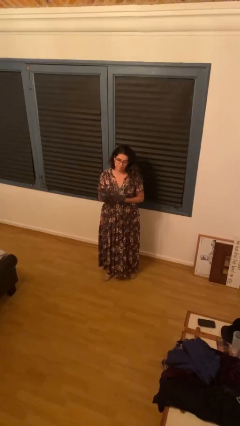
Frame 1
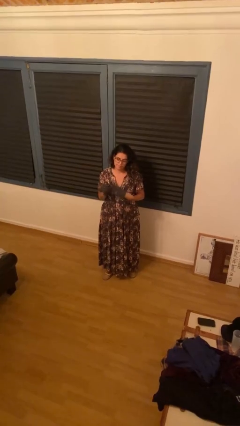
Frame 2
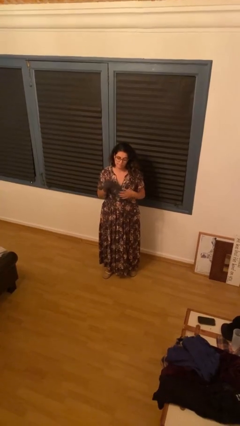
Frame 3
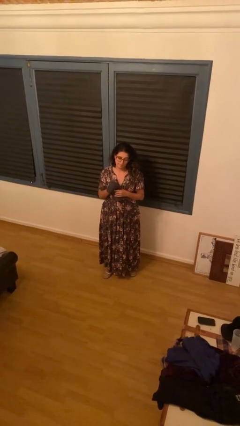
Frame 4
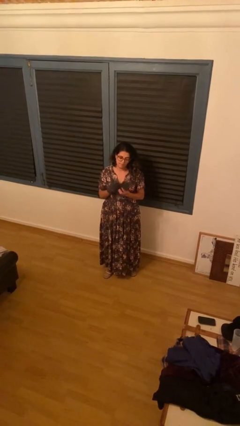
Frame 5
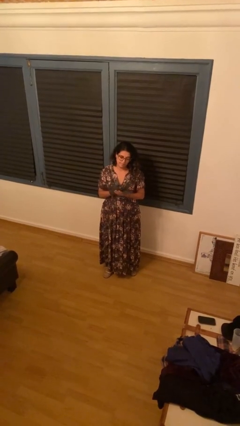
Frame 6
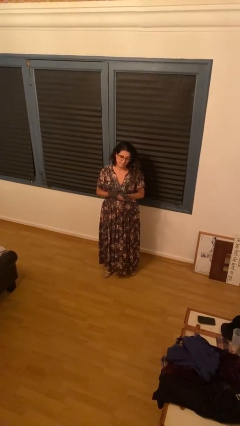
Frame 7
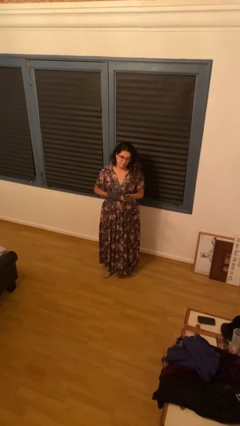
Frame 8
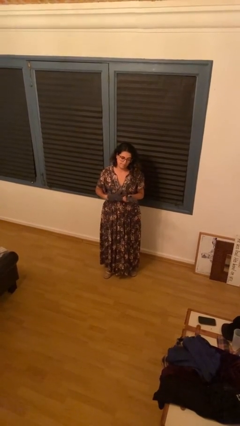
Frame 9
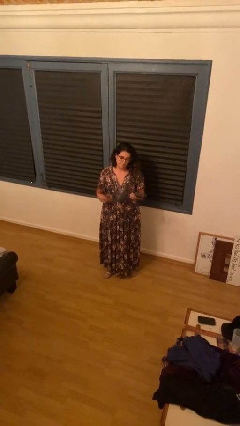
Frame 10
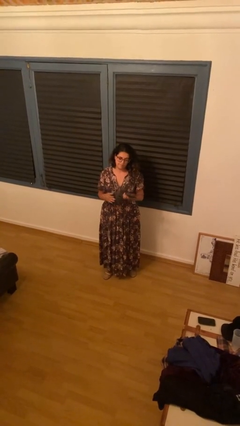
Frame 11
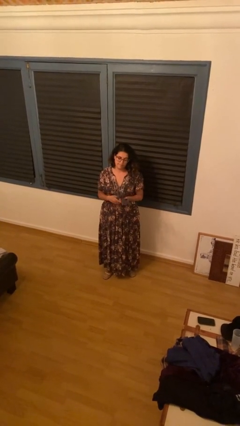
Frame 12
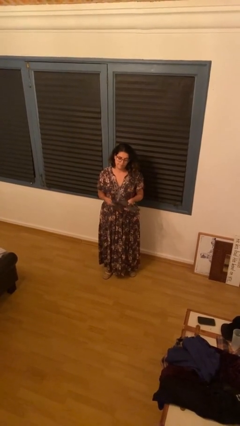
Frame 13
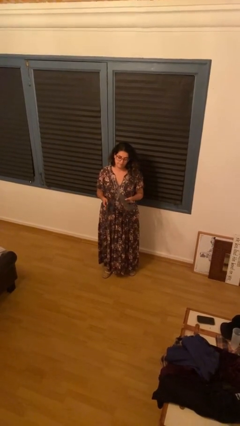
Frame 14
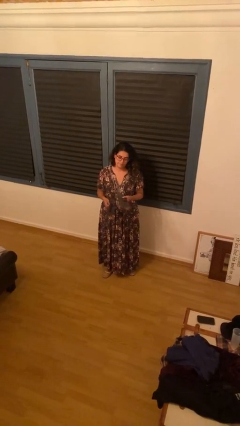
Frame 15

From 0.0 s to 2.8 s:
person takes off gloves

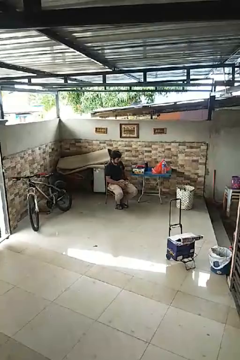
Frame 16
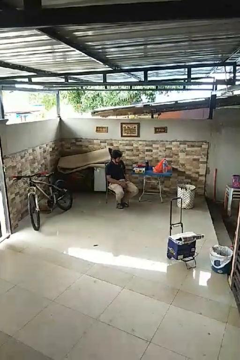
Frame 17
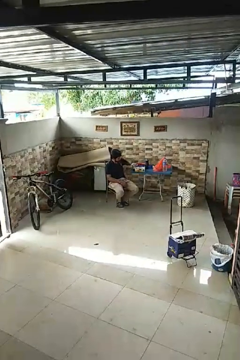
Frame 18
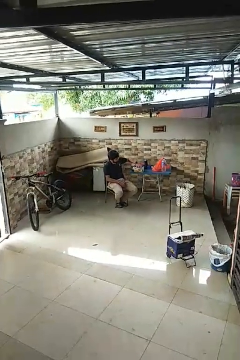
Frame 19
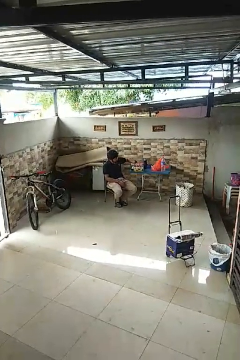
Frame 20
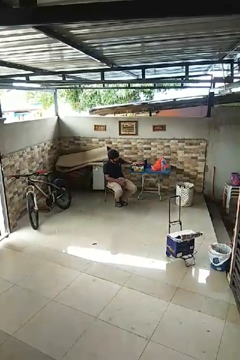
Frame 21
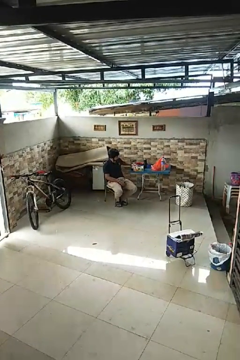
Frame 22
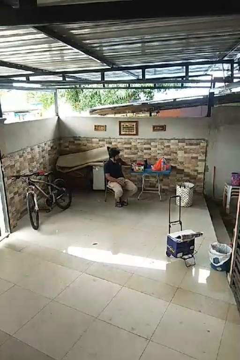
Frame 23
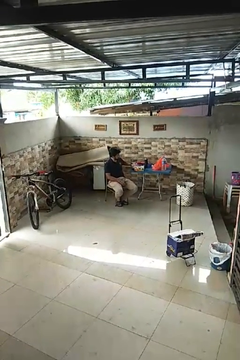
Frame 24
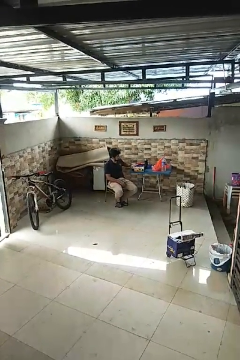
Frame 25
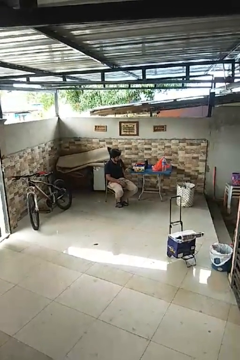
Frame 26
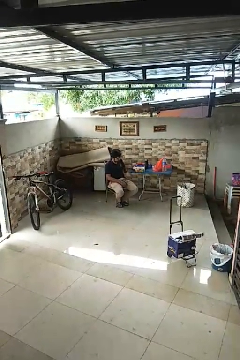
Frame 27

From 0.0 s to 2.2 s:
person taps object with finger

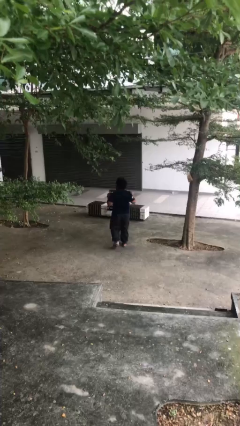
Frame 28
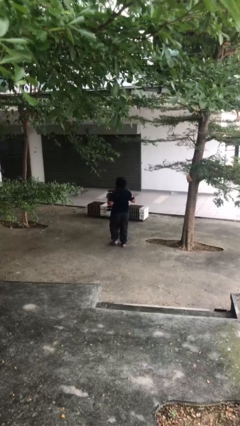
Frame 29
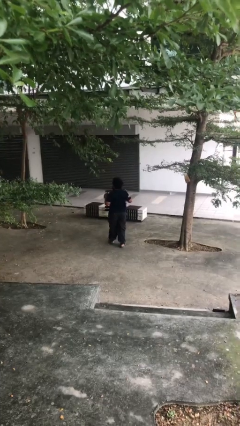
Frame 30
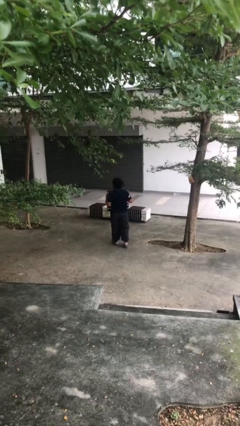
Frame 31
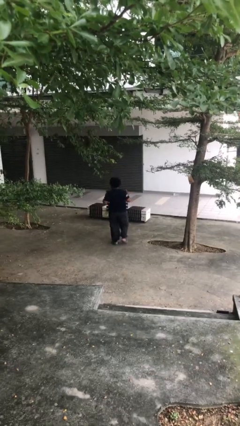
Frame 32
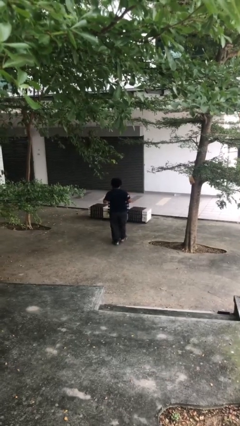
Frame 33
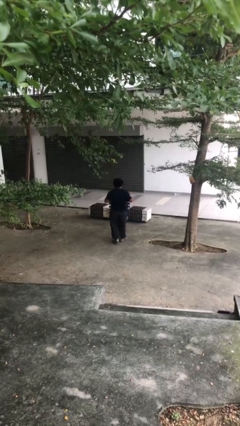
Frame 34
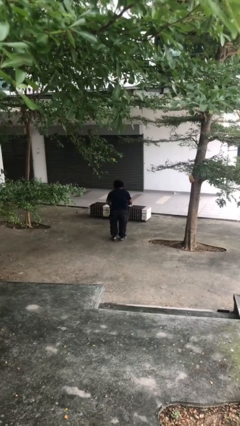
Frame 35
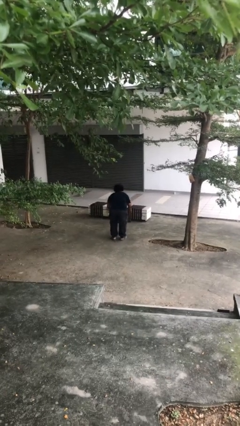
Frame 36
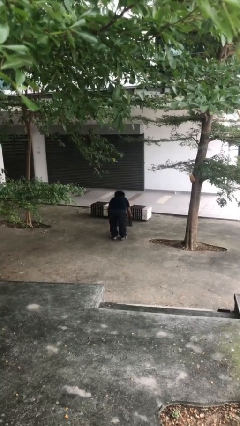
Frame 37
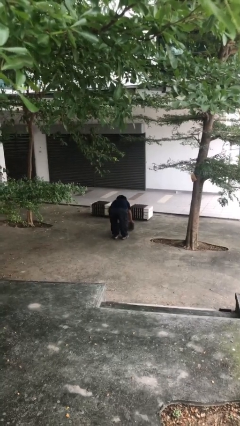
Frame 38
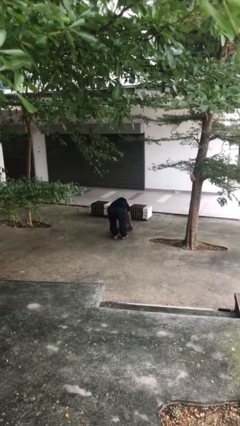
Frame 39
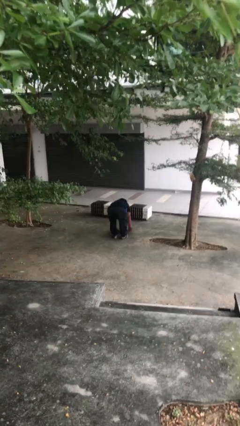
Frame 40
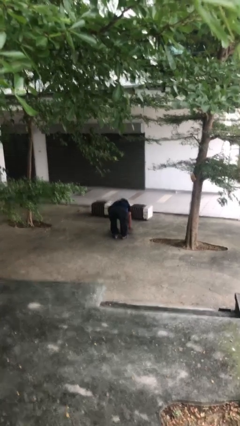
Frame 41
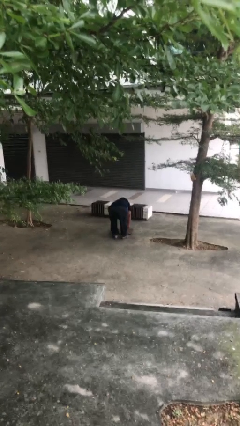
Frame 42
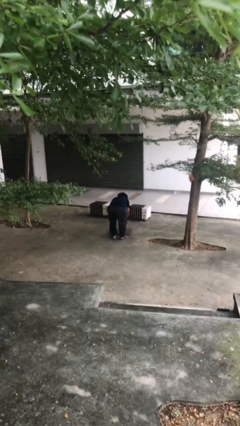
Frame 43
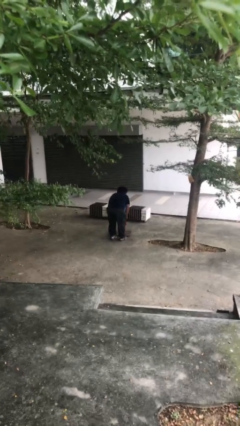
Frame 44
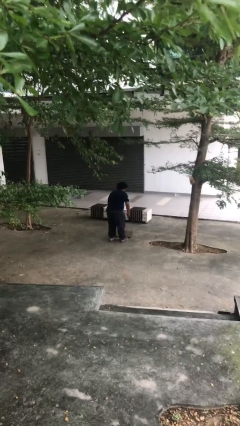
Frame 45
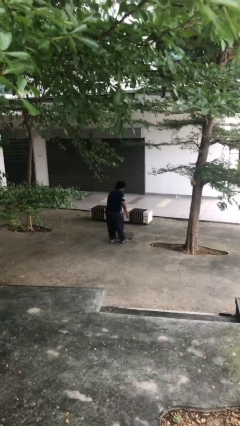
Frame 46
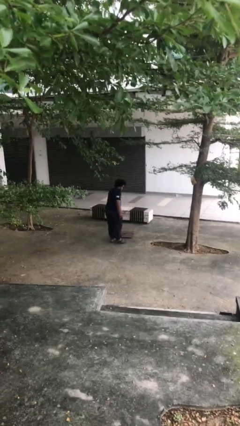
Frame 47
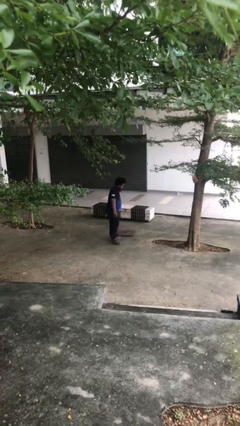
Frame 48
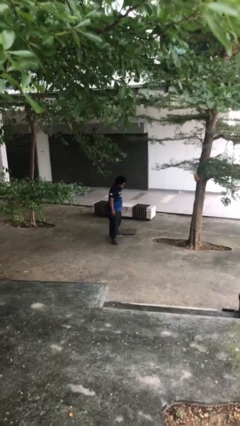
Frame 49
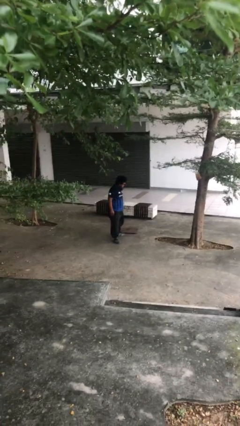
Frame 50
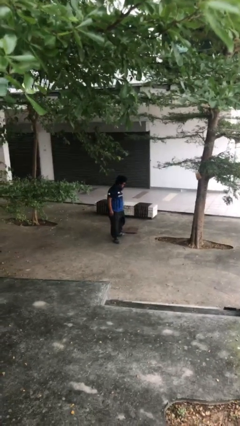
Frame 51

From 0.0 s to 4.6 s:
person puts down object on floor

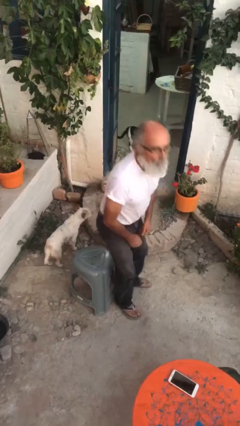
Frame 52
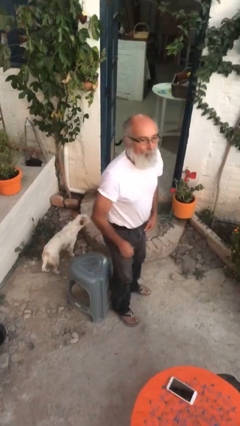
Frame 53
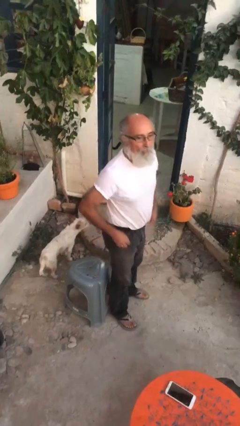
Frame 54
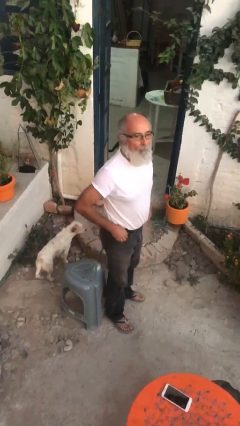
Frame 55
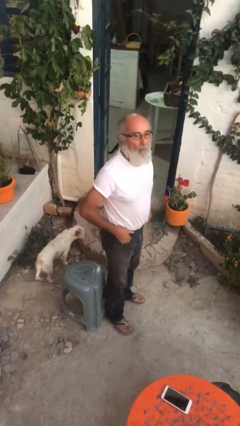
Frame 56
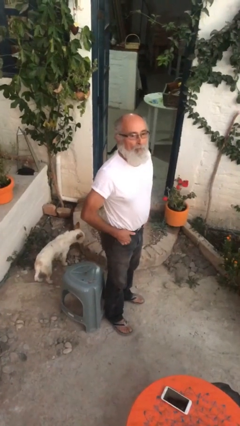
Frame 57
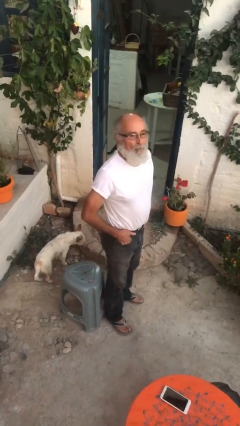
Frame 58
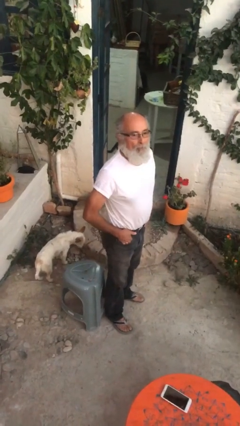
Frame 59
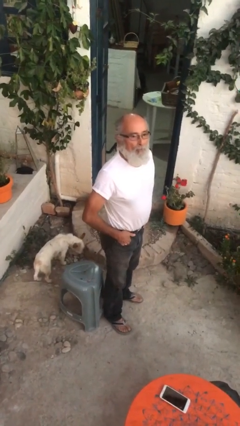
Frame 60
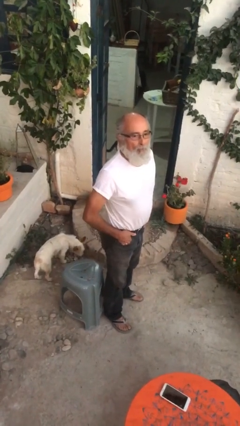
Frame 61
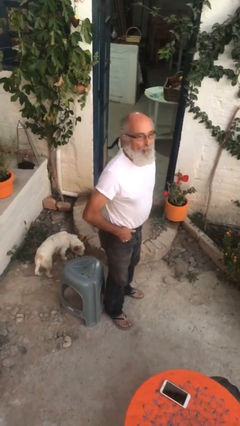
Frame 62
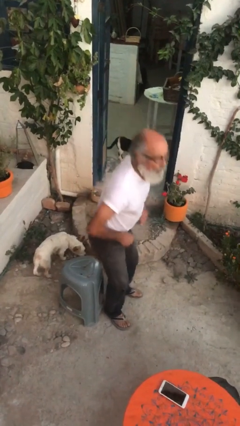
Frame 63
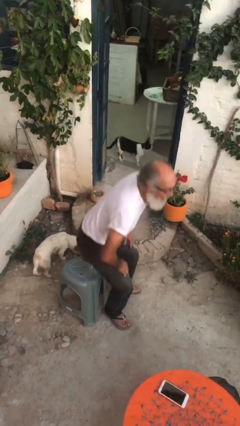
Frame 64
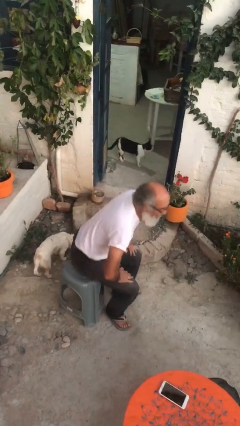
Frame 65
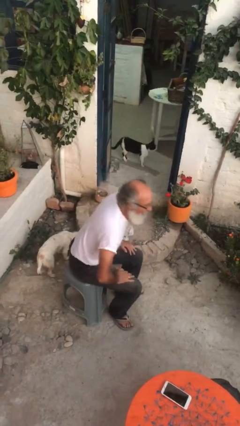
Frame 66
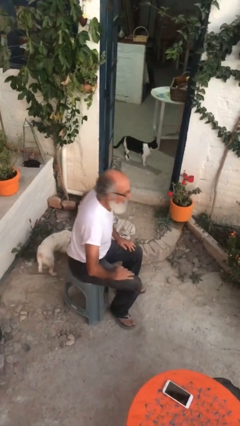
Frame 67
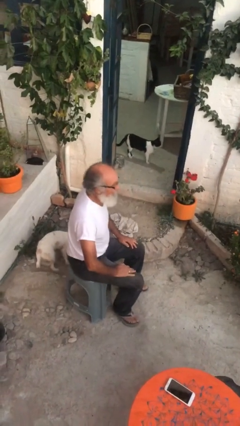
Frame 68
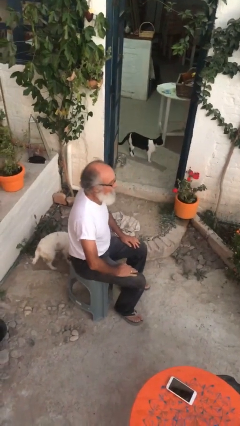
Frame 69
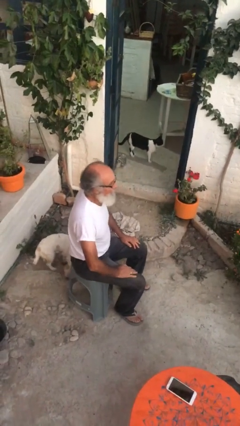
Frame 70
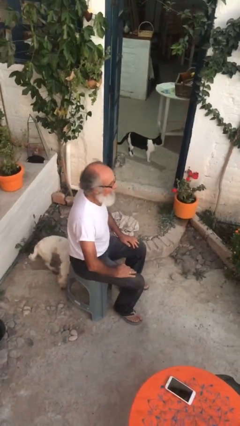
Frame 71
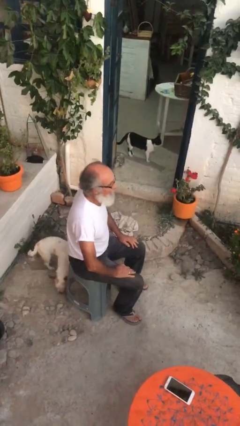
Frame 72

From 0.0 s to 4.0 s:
person sits down

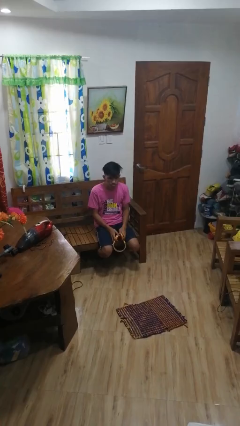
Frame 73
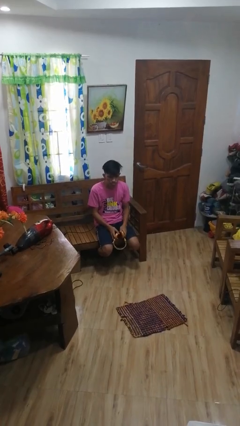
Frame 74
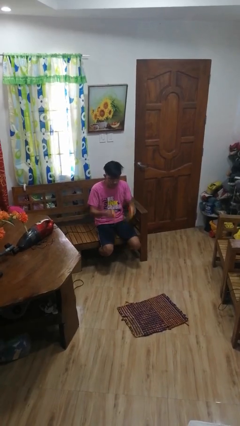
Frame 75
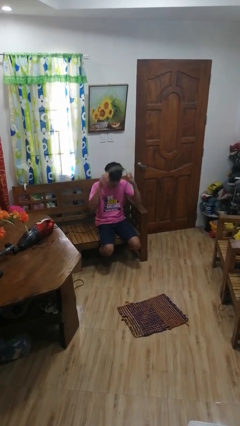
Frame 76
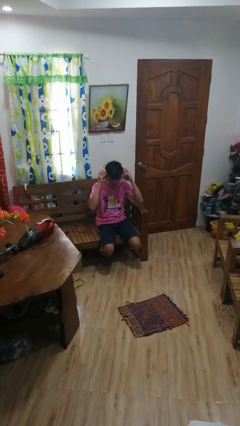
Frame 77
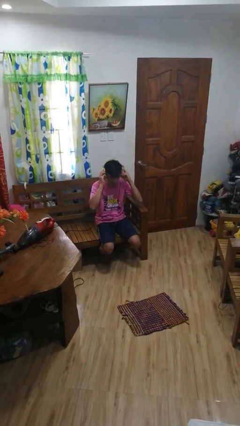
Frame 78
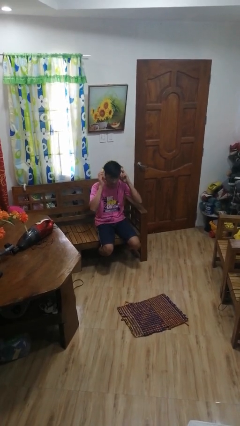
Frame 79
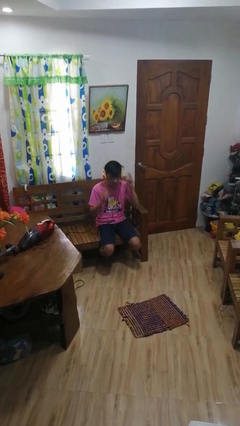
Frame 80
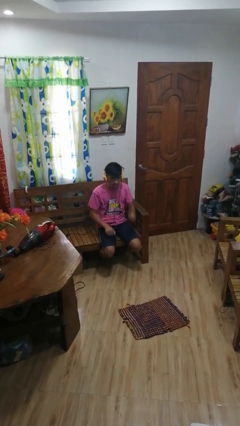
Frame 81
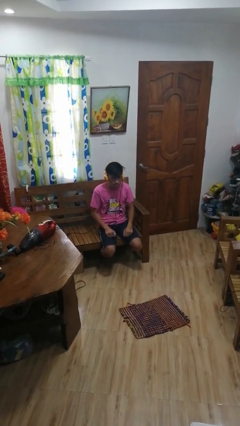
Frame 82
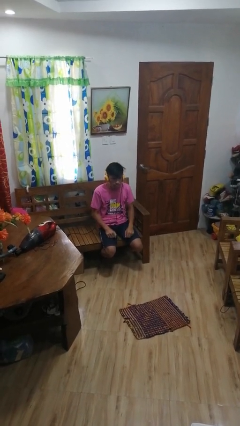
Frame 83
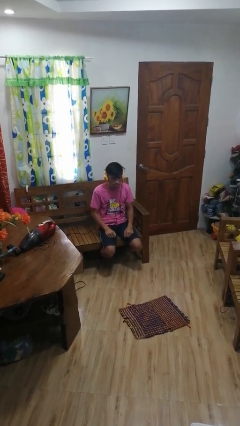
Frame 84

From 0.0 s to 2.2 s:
person puts on headphones

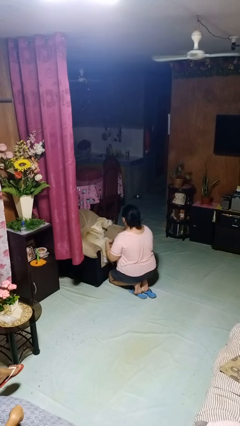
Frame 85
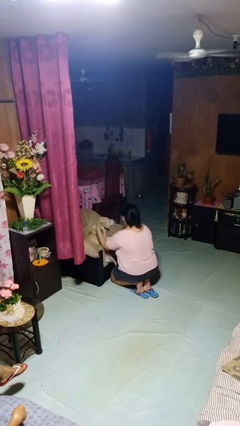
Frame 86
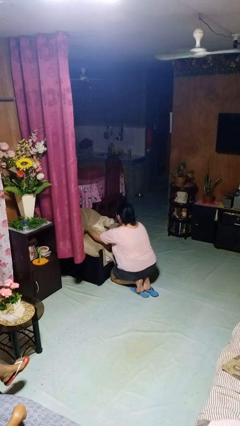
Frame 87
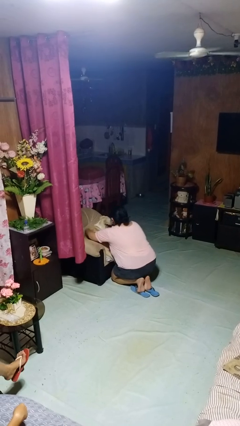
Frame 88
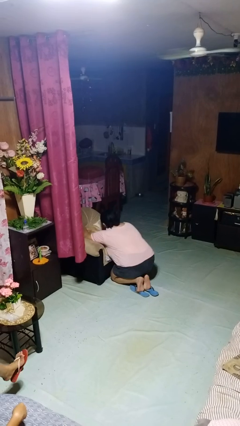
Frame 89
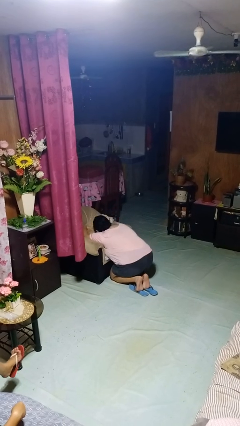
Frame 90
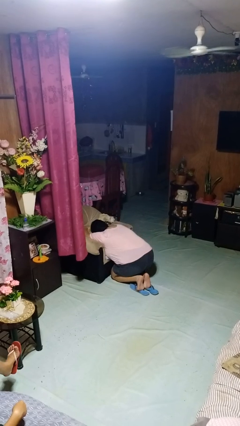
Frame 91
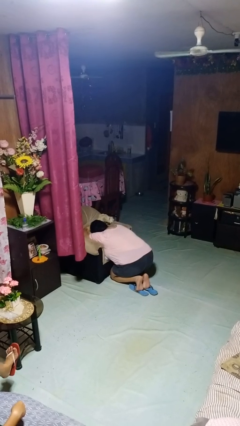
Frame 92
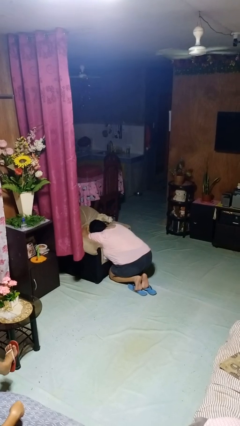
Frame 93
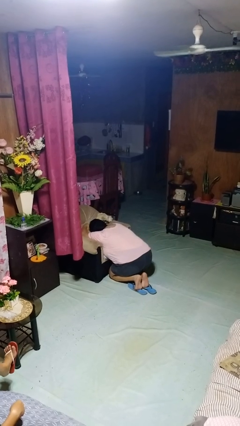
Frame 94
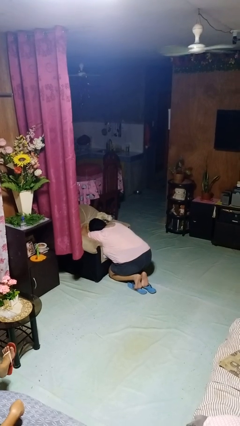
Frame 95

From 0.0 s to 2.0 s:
person hugs dog
